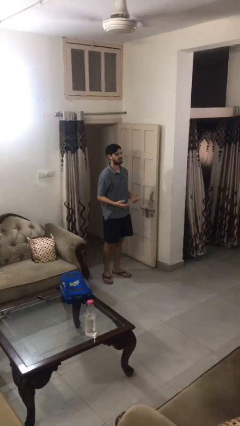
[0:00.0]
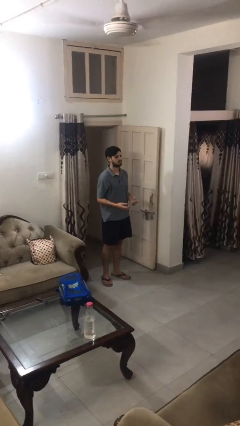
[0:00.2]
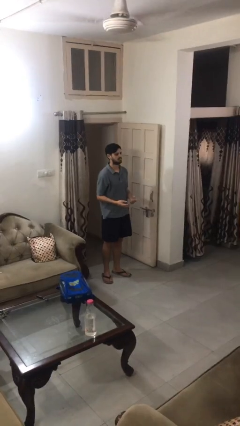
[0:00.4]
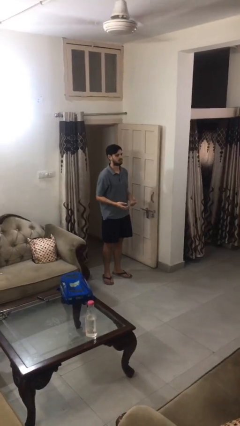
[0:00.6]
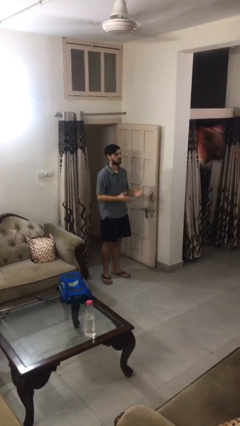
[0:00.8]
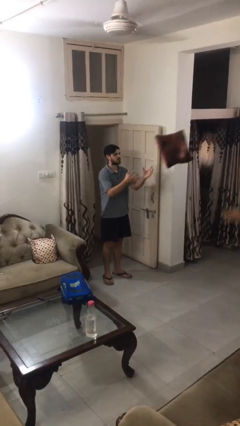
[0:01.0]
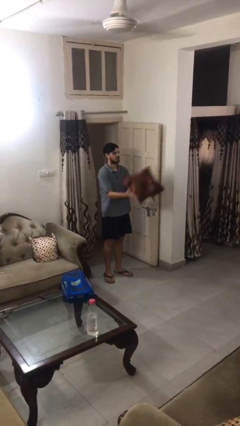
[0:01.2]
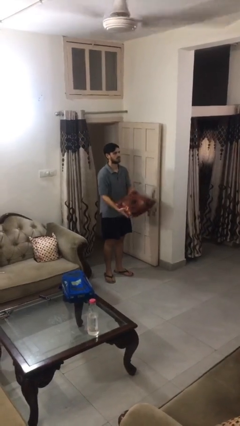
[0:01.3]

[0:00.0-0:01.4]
person catches object from person

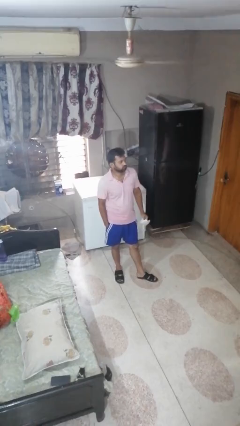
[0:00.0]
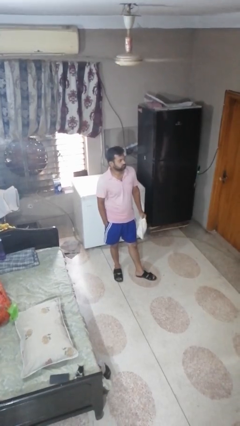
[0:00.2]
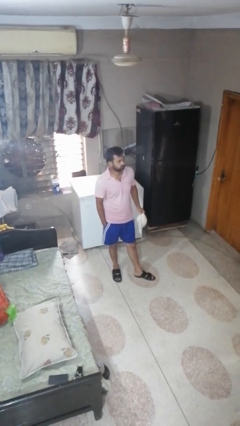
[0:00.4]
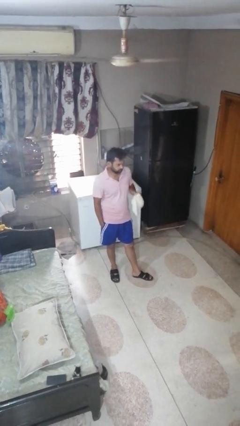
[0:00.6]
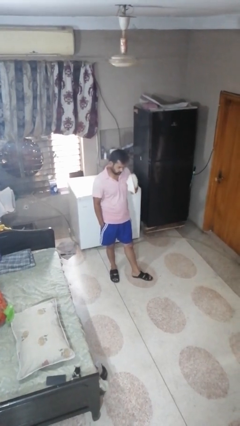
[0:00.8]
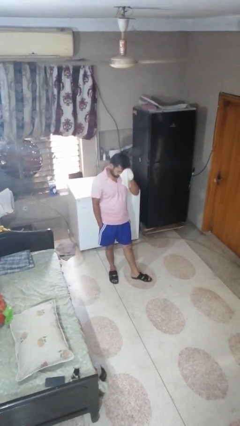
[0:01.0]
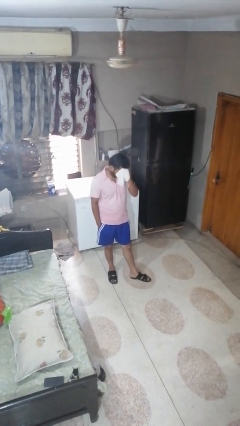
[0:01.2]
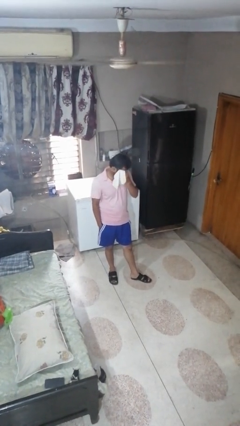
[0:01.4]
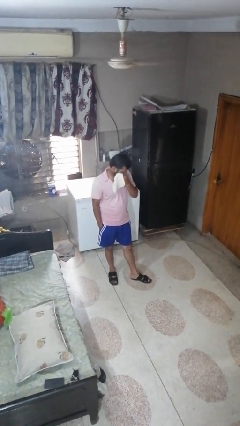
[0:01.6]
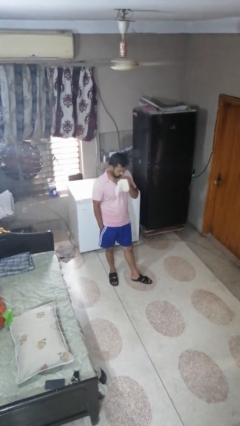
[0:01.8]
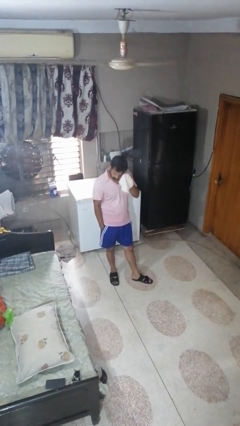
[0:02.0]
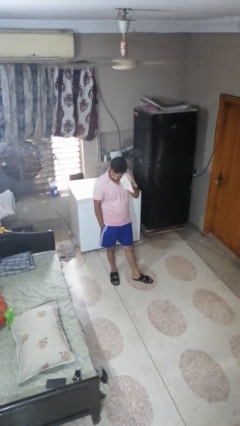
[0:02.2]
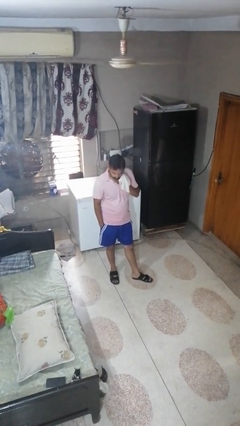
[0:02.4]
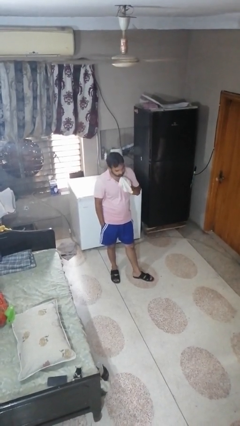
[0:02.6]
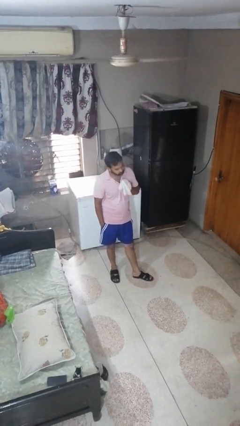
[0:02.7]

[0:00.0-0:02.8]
person wipes mouth with napkin

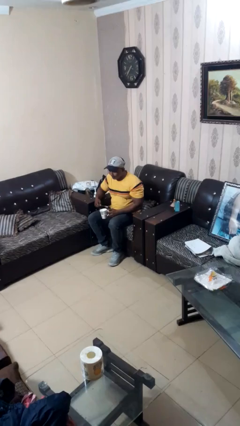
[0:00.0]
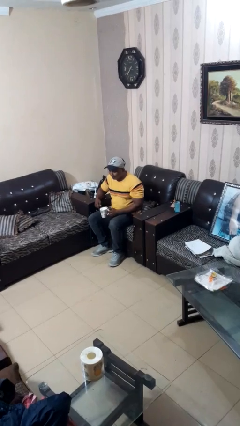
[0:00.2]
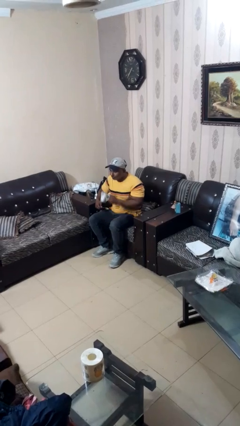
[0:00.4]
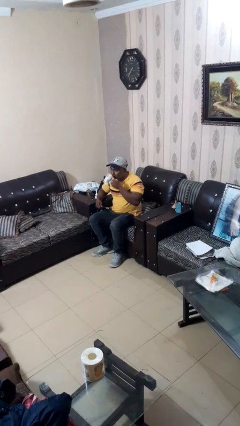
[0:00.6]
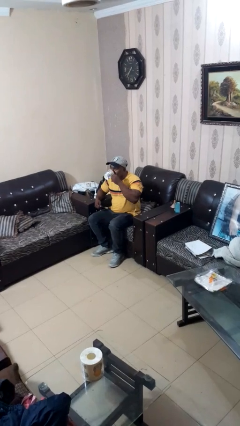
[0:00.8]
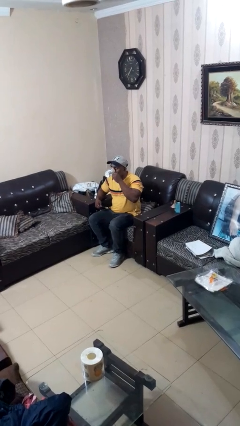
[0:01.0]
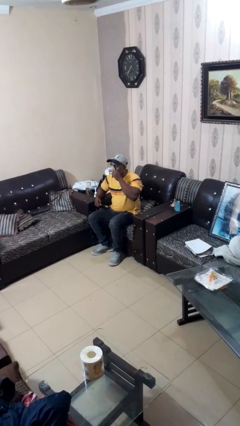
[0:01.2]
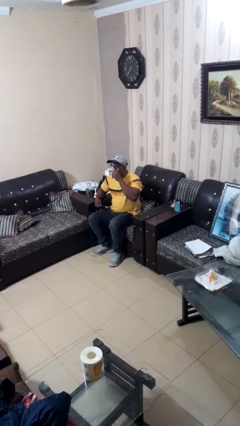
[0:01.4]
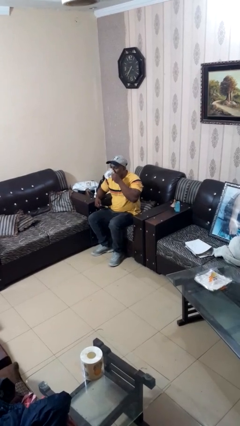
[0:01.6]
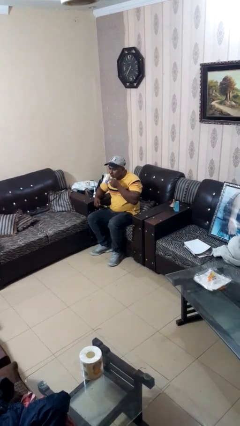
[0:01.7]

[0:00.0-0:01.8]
person drinks from mug

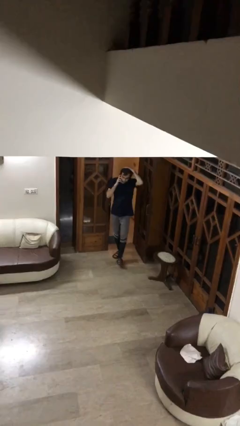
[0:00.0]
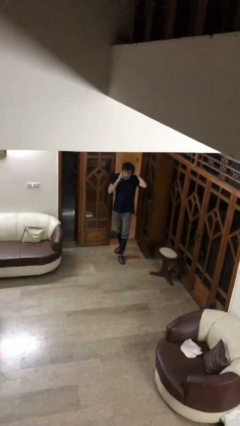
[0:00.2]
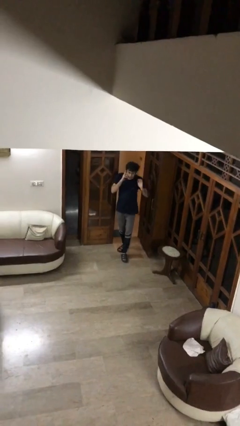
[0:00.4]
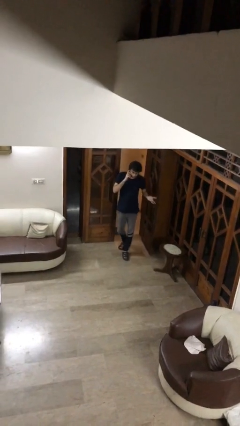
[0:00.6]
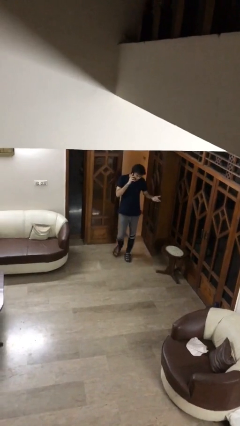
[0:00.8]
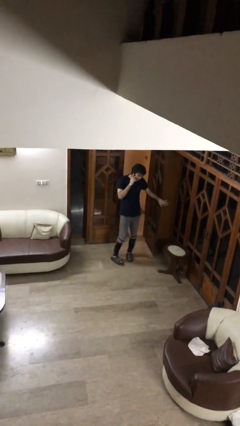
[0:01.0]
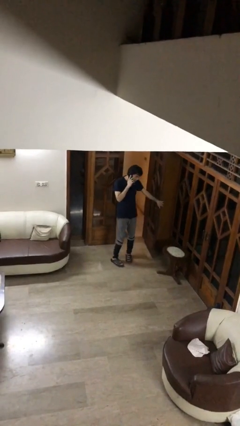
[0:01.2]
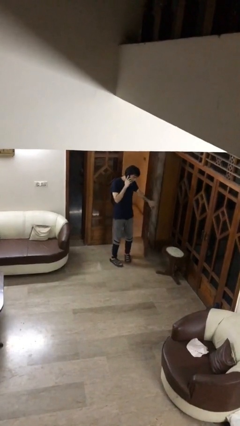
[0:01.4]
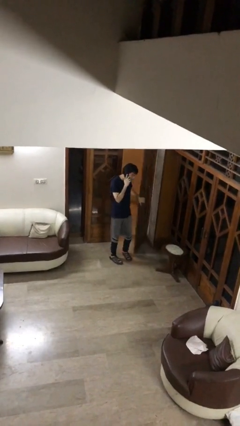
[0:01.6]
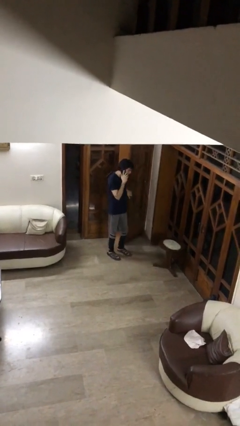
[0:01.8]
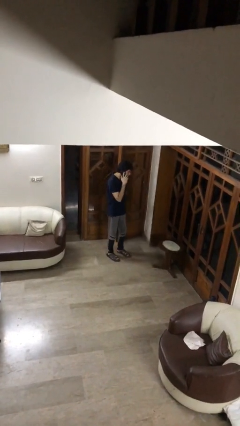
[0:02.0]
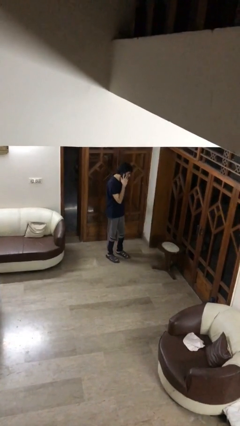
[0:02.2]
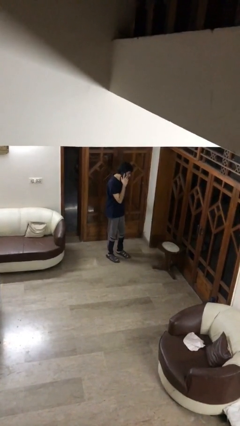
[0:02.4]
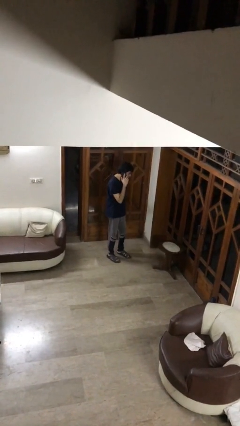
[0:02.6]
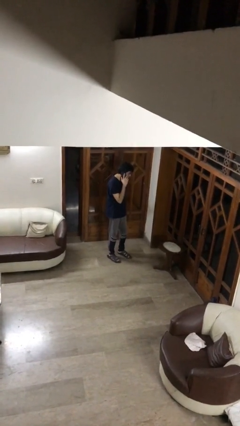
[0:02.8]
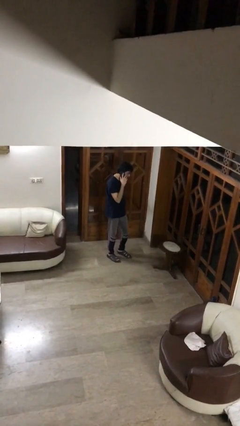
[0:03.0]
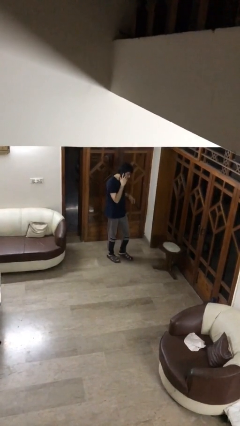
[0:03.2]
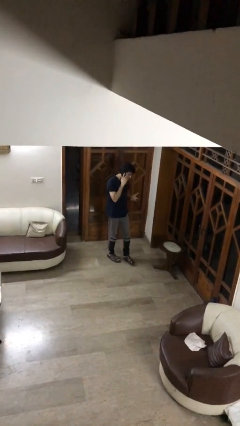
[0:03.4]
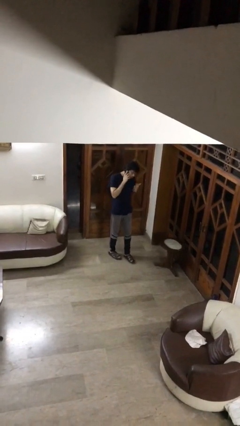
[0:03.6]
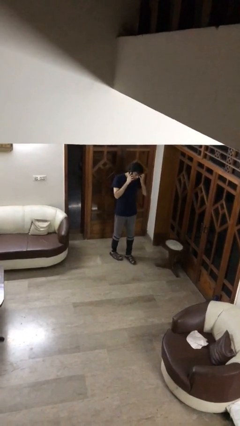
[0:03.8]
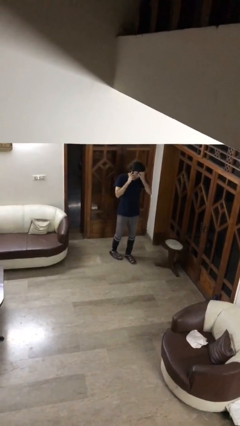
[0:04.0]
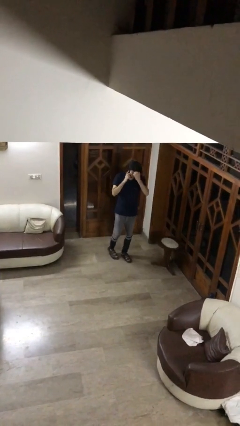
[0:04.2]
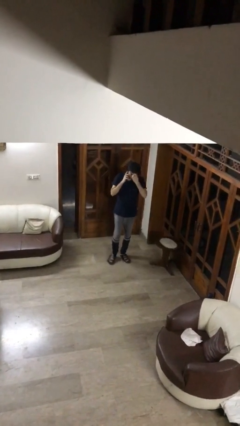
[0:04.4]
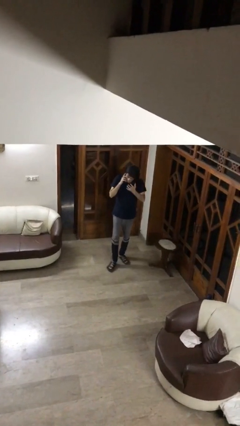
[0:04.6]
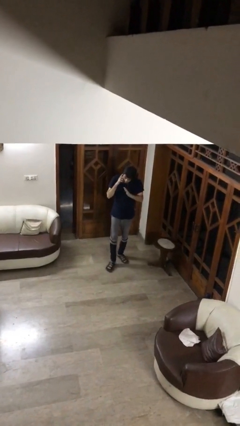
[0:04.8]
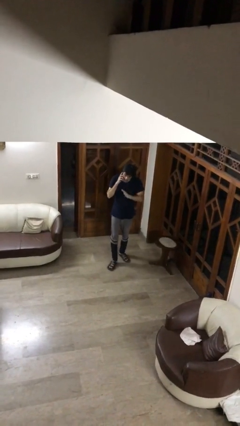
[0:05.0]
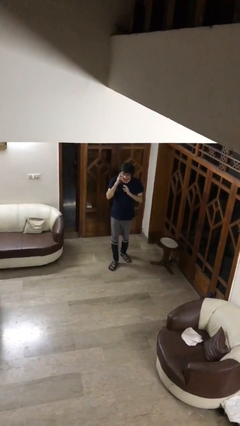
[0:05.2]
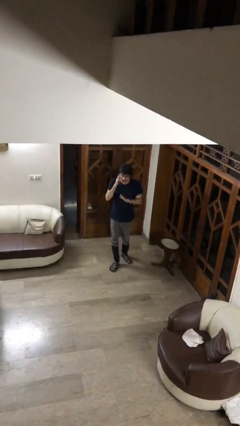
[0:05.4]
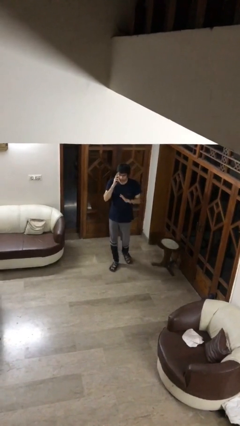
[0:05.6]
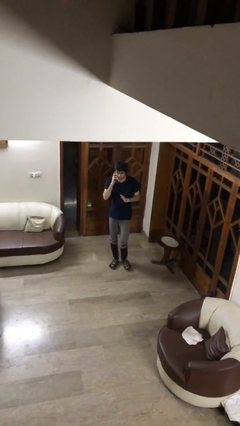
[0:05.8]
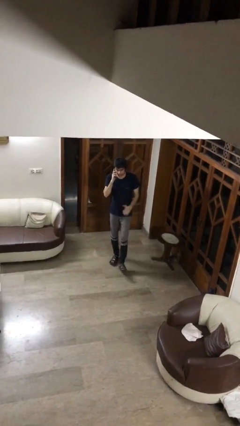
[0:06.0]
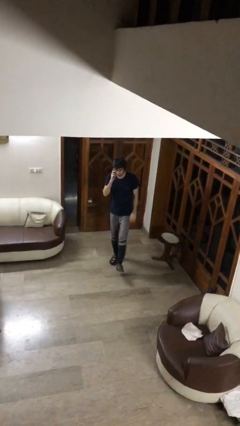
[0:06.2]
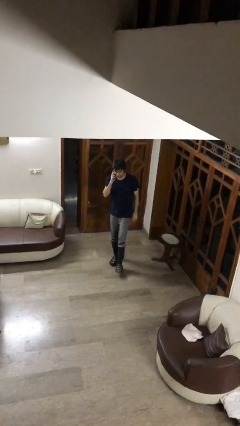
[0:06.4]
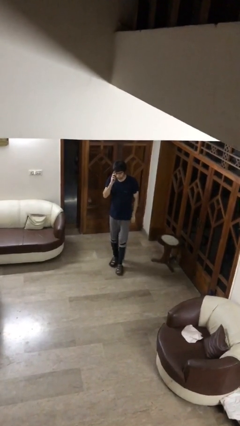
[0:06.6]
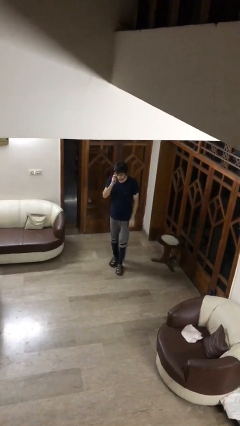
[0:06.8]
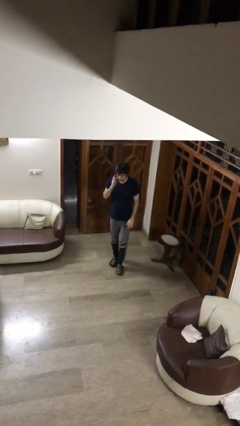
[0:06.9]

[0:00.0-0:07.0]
person closes facility door

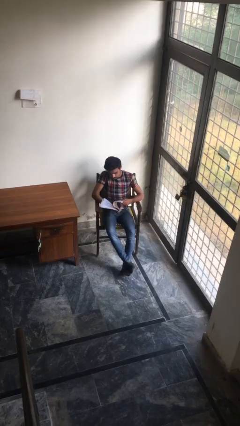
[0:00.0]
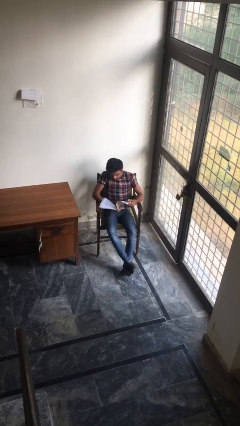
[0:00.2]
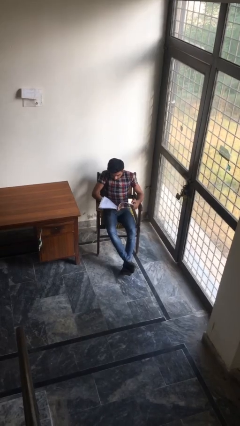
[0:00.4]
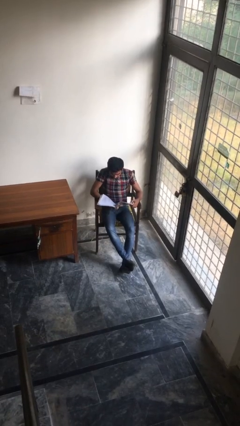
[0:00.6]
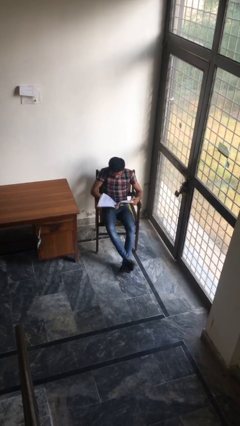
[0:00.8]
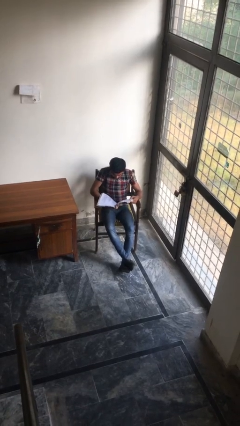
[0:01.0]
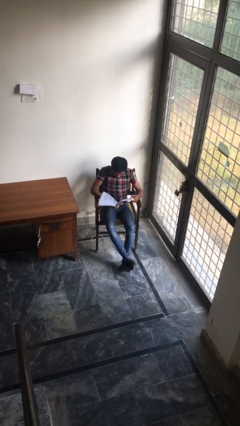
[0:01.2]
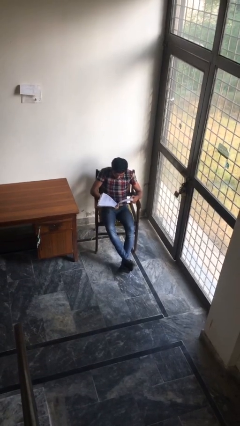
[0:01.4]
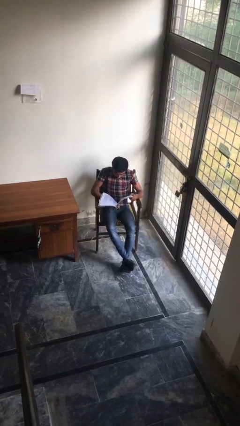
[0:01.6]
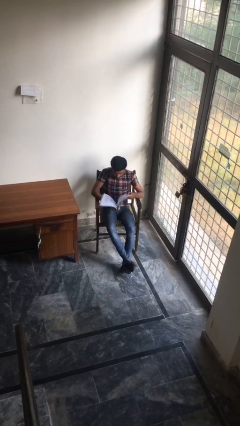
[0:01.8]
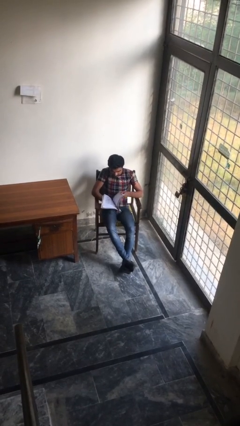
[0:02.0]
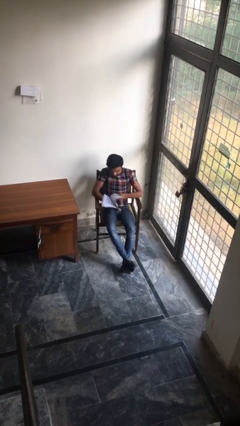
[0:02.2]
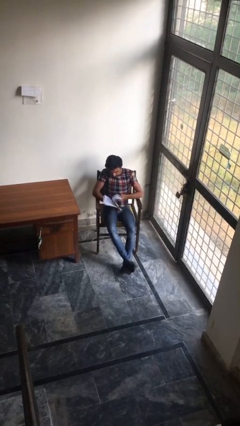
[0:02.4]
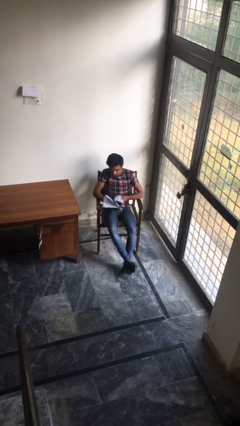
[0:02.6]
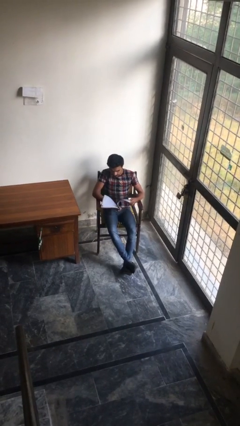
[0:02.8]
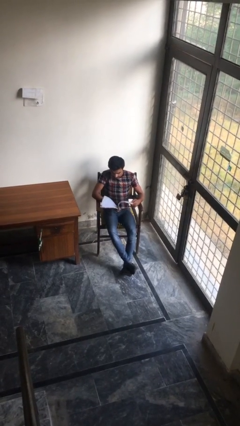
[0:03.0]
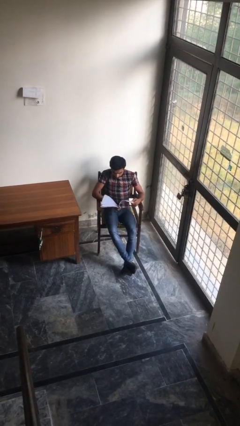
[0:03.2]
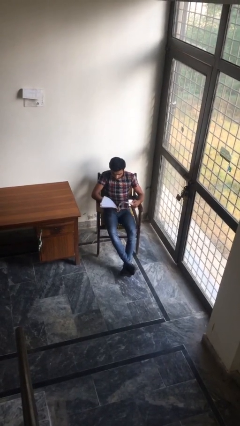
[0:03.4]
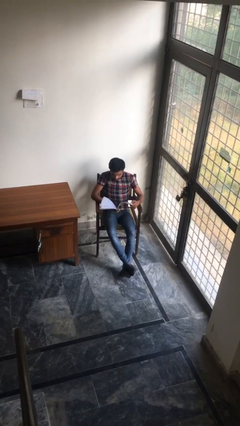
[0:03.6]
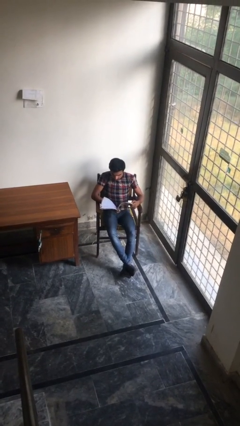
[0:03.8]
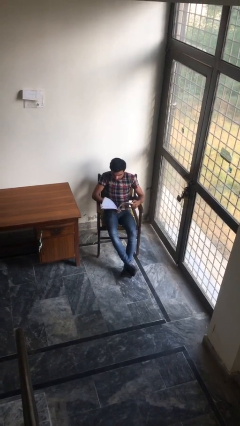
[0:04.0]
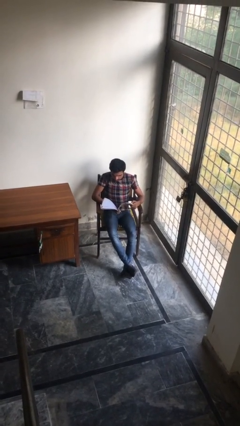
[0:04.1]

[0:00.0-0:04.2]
person reads document

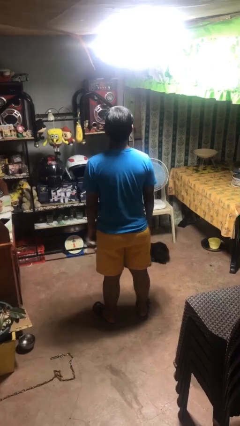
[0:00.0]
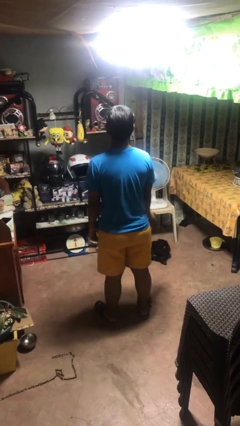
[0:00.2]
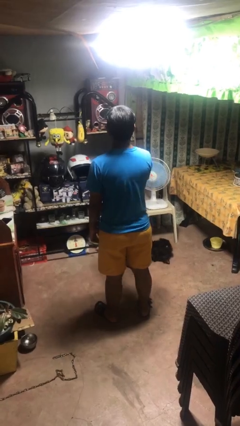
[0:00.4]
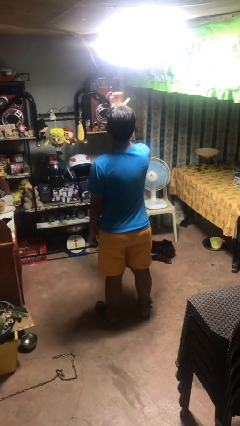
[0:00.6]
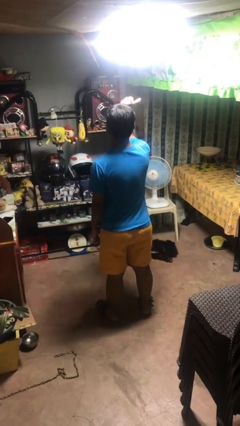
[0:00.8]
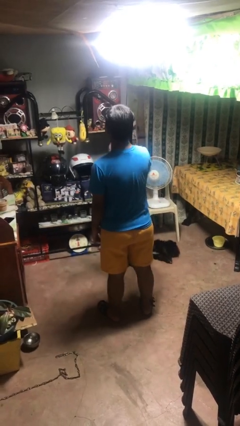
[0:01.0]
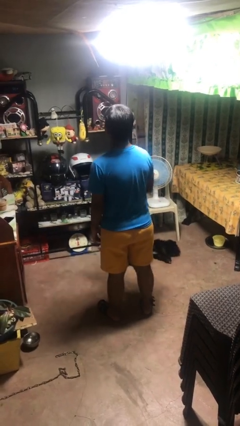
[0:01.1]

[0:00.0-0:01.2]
person gestures swipe up
